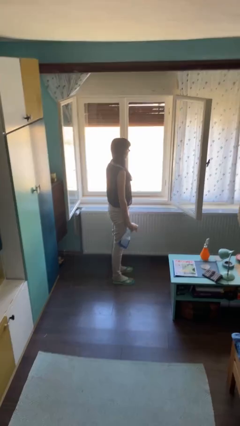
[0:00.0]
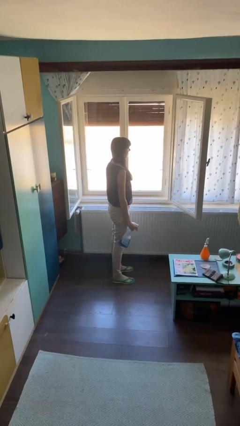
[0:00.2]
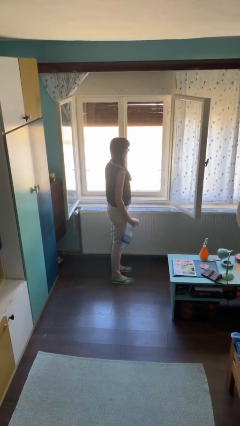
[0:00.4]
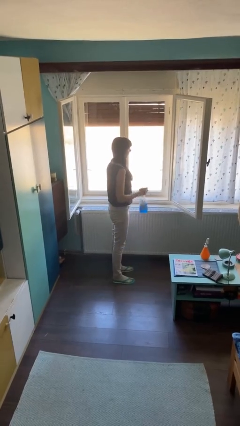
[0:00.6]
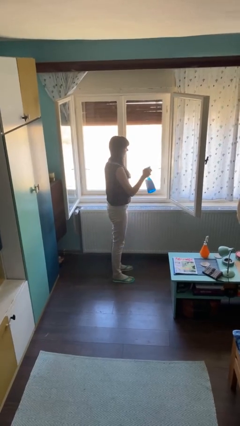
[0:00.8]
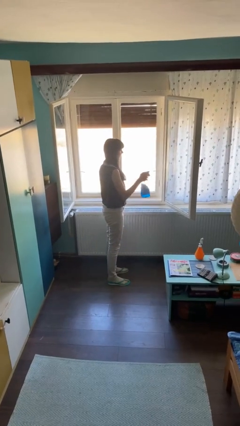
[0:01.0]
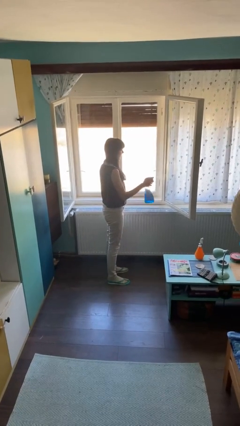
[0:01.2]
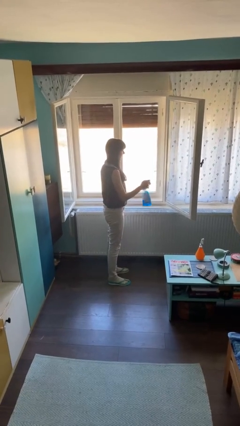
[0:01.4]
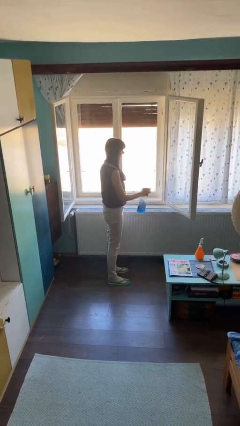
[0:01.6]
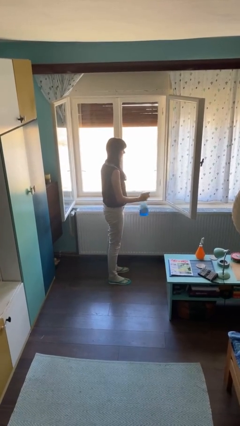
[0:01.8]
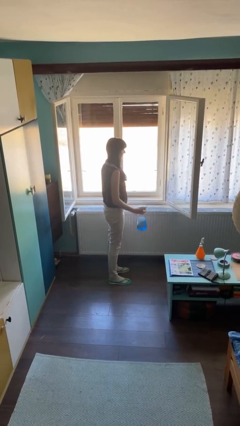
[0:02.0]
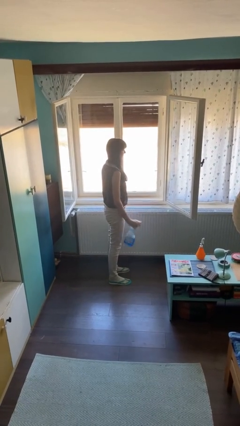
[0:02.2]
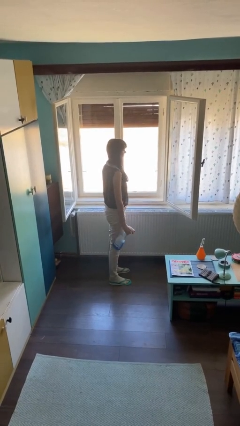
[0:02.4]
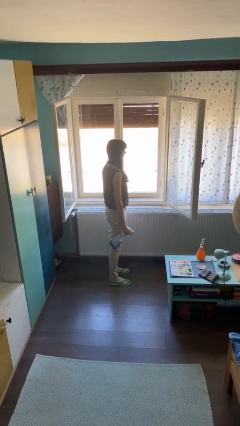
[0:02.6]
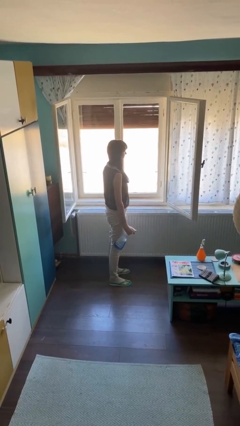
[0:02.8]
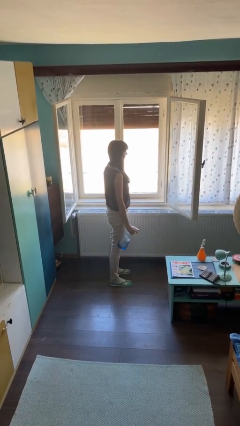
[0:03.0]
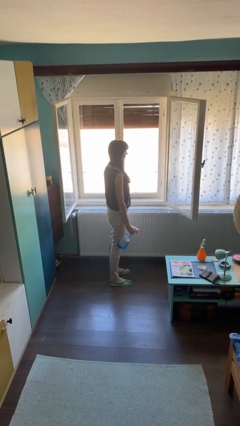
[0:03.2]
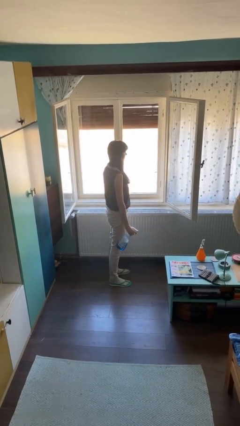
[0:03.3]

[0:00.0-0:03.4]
person sprays from bottle

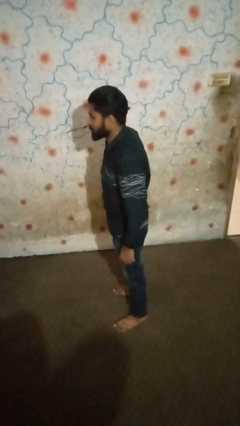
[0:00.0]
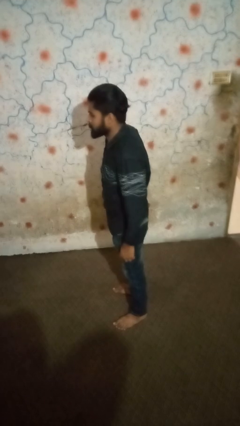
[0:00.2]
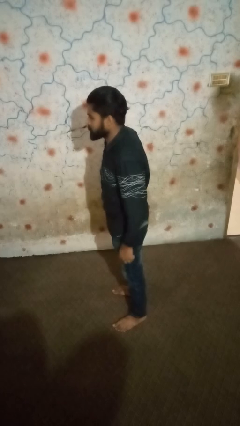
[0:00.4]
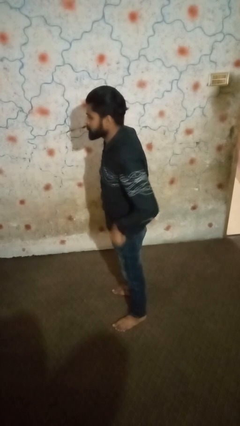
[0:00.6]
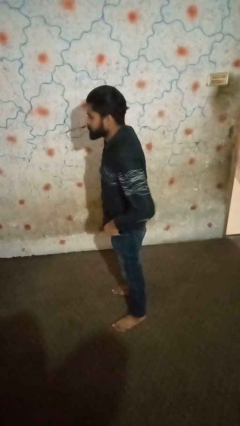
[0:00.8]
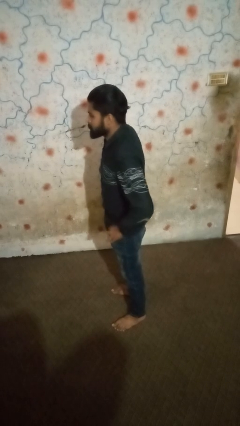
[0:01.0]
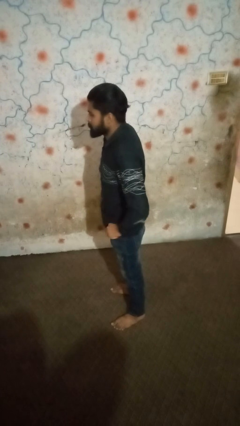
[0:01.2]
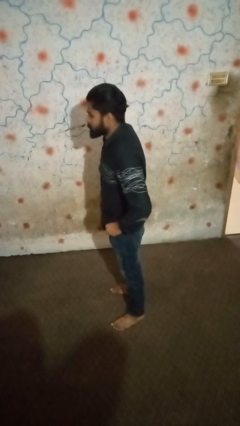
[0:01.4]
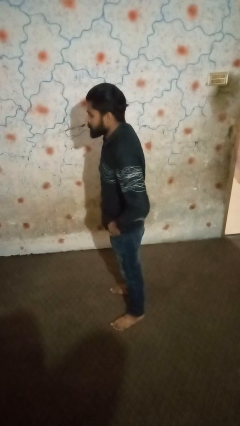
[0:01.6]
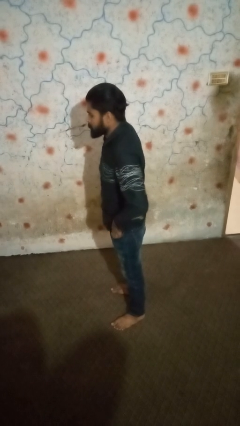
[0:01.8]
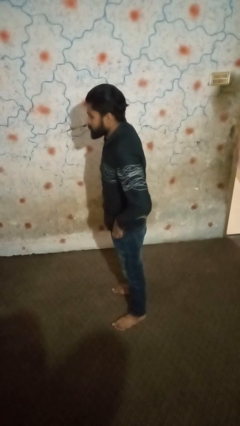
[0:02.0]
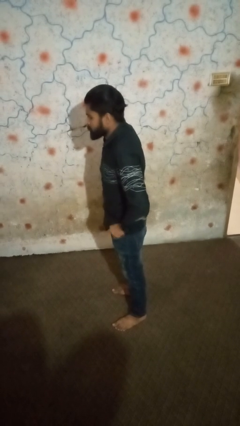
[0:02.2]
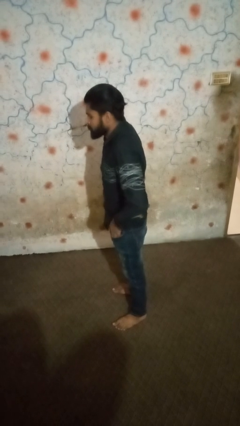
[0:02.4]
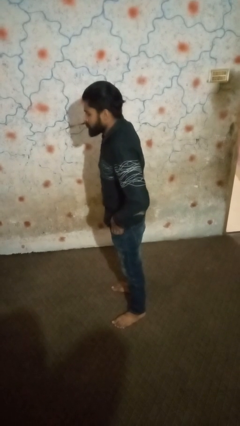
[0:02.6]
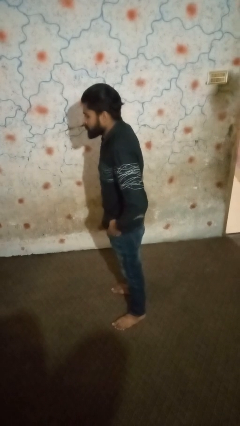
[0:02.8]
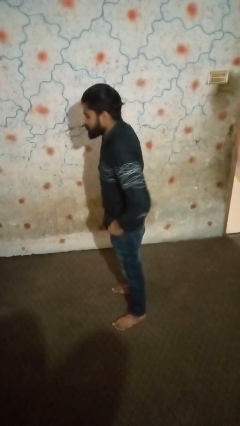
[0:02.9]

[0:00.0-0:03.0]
person puts hands in back pockets

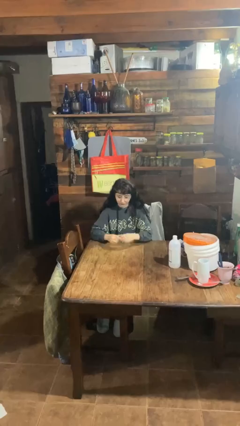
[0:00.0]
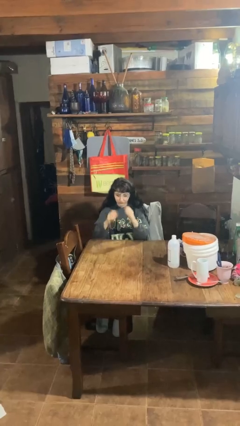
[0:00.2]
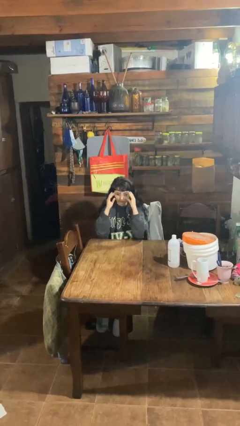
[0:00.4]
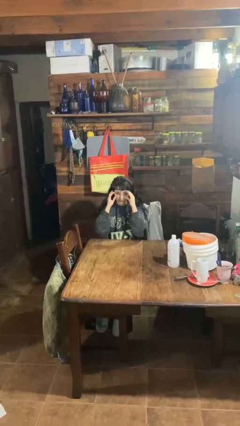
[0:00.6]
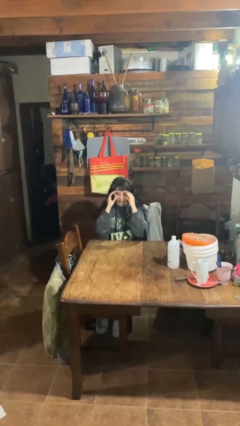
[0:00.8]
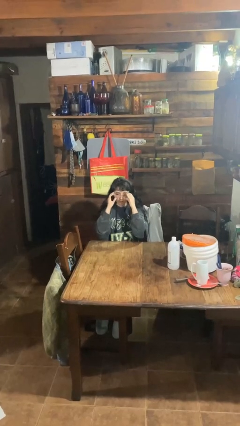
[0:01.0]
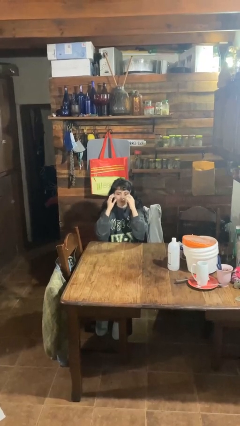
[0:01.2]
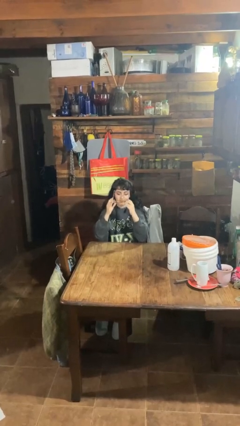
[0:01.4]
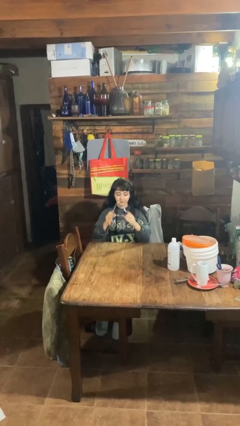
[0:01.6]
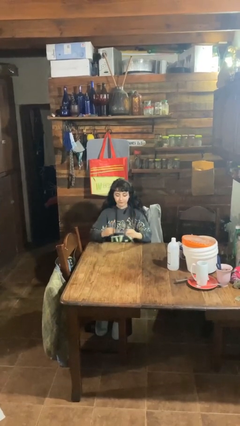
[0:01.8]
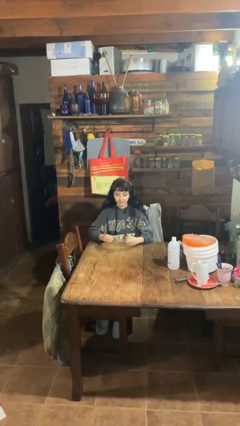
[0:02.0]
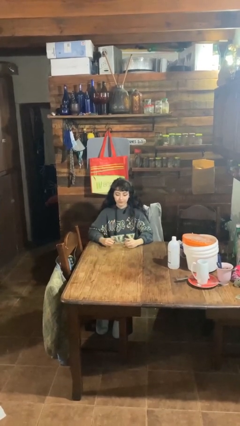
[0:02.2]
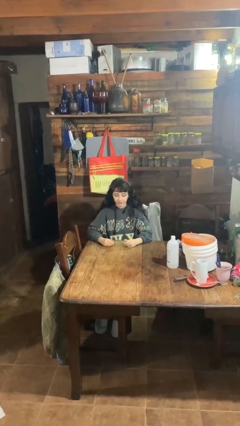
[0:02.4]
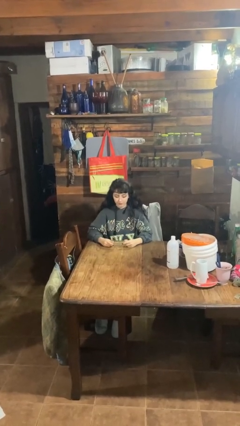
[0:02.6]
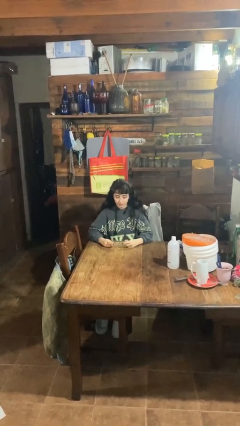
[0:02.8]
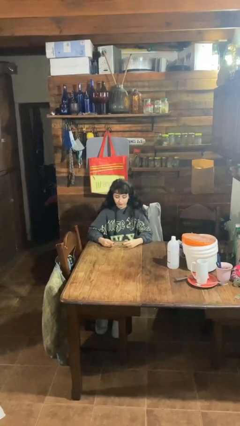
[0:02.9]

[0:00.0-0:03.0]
person takes off glasses

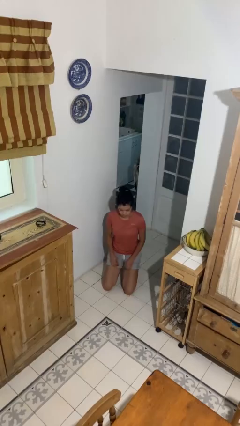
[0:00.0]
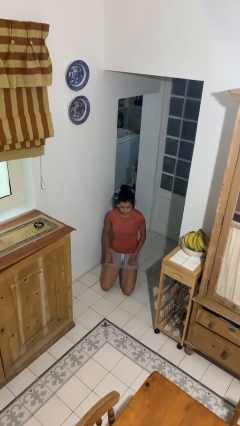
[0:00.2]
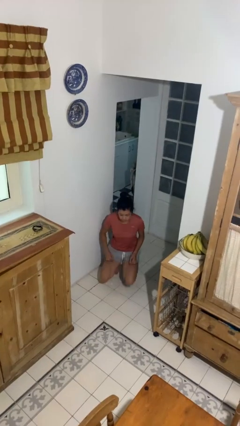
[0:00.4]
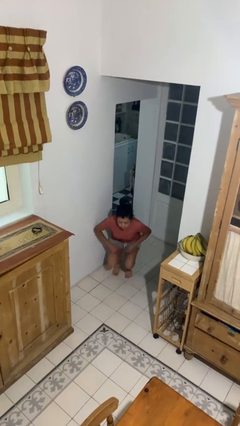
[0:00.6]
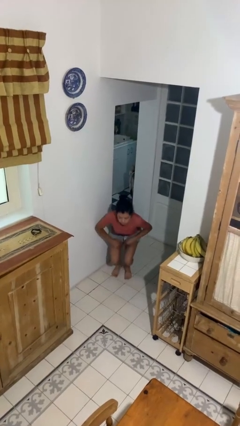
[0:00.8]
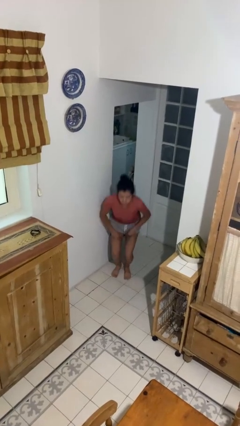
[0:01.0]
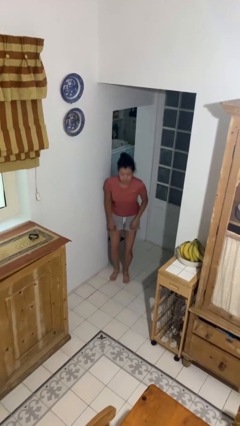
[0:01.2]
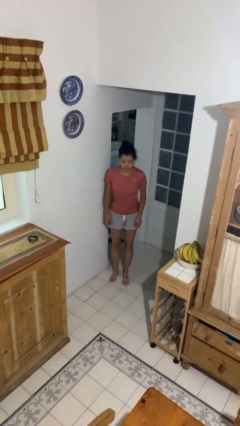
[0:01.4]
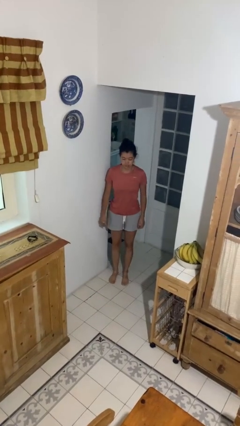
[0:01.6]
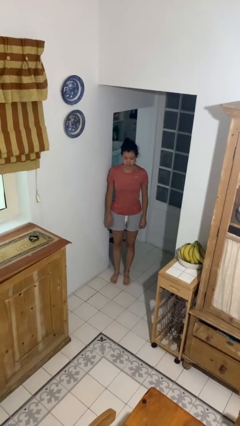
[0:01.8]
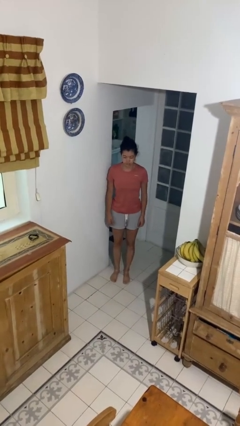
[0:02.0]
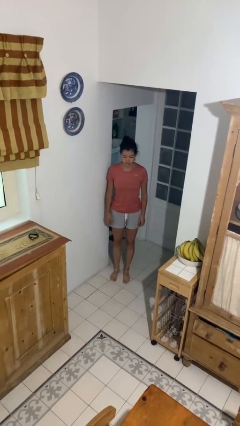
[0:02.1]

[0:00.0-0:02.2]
person stands up from floor

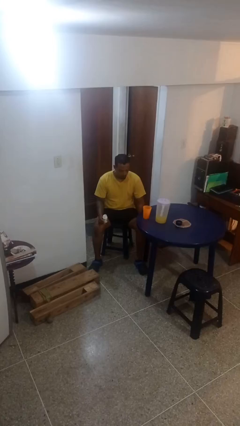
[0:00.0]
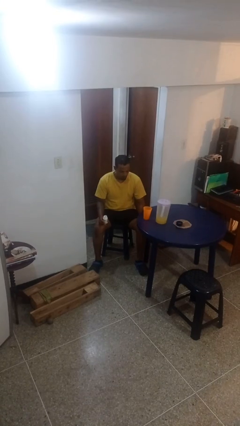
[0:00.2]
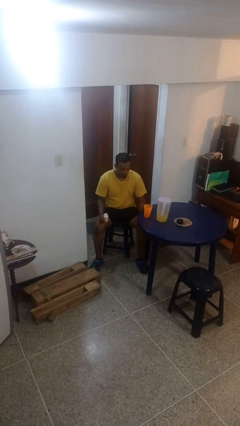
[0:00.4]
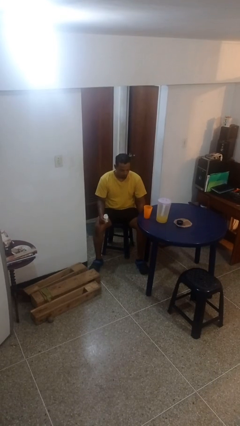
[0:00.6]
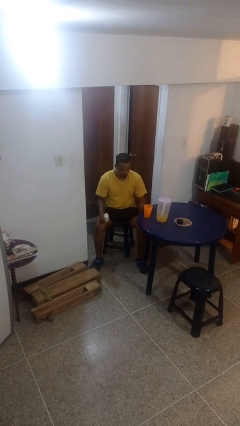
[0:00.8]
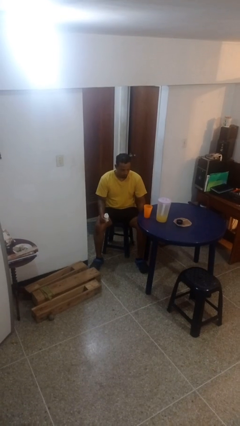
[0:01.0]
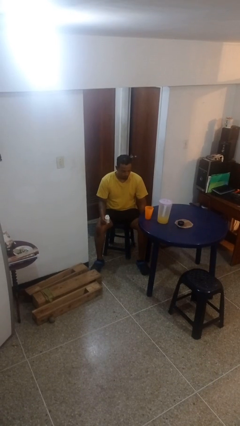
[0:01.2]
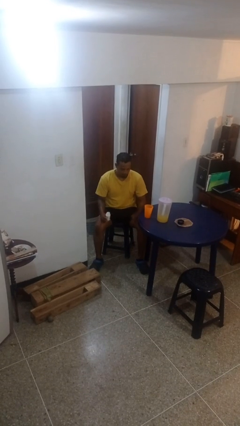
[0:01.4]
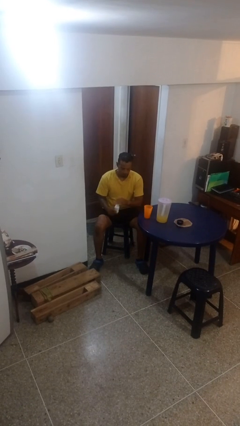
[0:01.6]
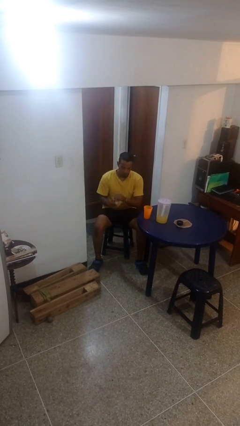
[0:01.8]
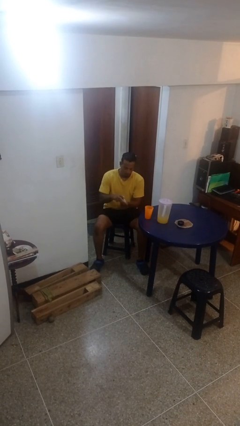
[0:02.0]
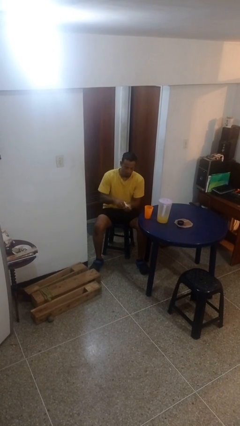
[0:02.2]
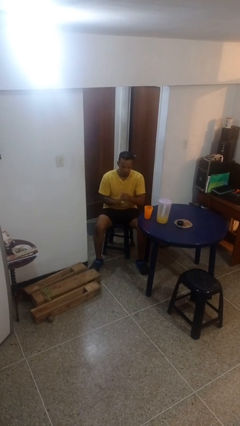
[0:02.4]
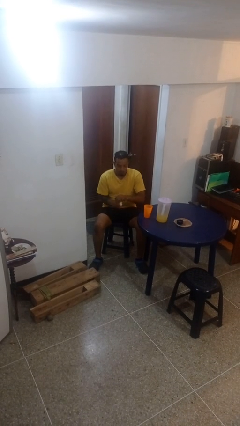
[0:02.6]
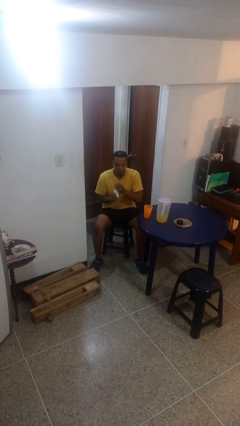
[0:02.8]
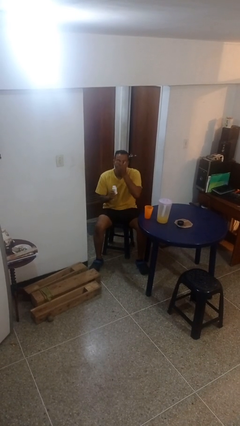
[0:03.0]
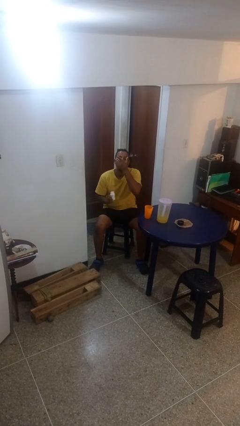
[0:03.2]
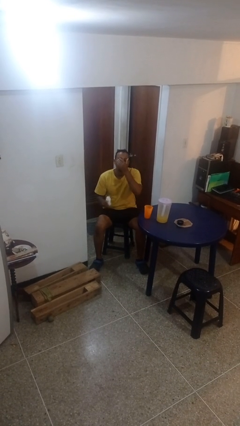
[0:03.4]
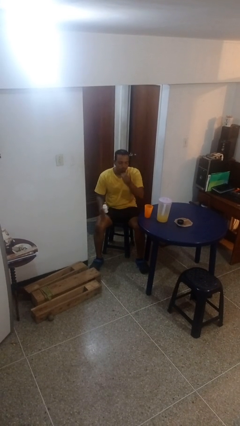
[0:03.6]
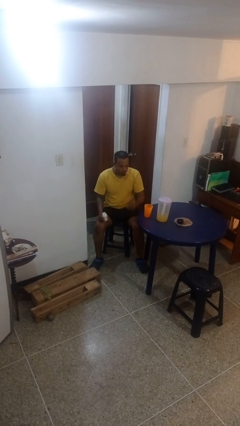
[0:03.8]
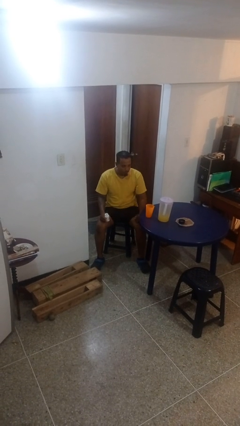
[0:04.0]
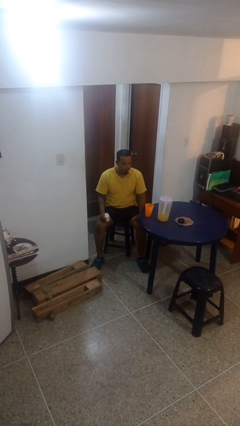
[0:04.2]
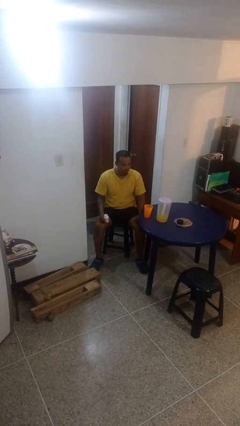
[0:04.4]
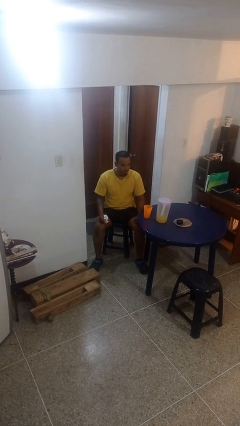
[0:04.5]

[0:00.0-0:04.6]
person takes medicine pills

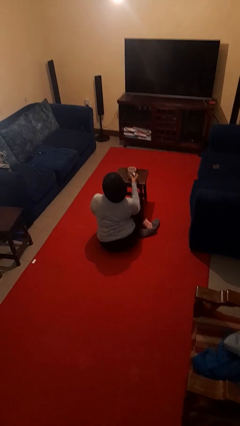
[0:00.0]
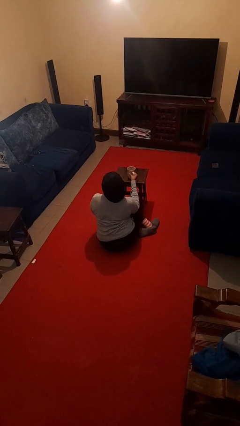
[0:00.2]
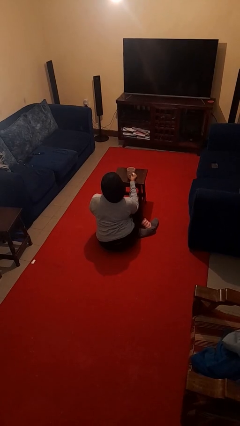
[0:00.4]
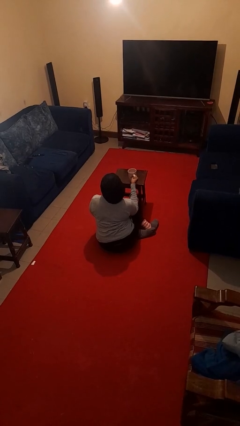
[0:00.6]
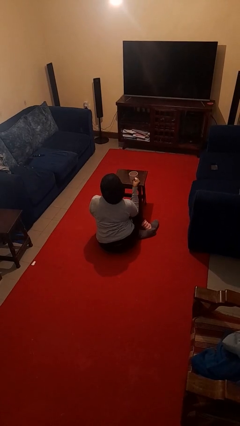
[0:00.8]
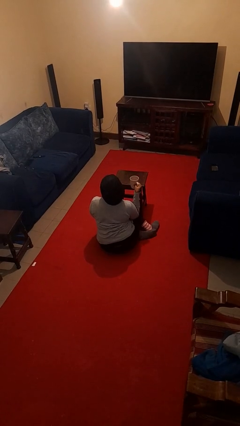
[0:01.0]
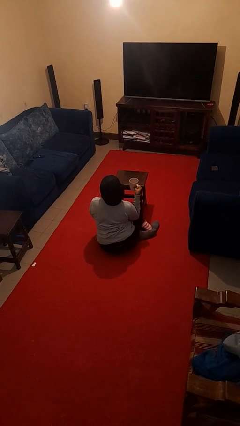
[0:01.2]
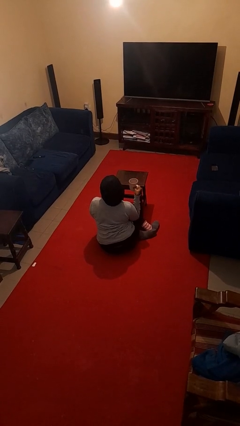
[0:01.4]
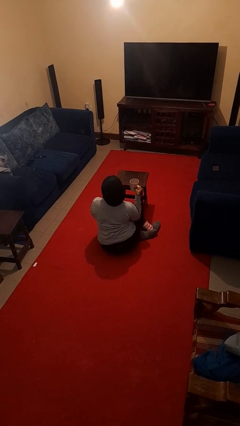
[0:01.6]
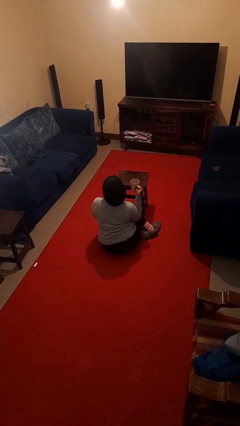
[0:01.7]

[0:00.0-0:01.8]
person picks up object from table
